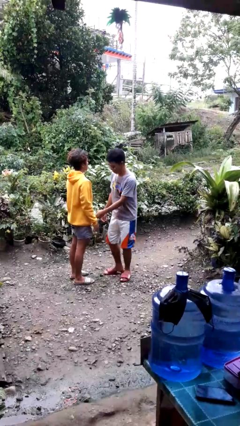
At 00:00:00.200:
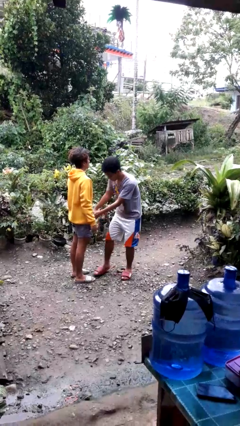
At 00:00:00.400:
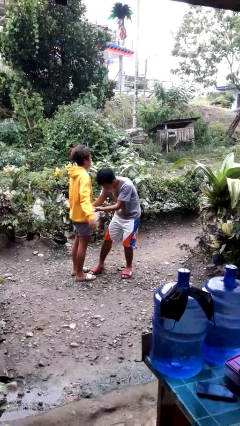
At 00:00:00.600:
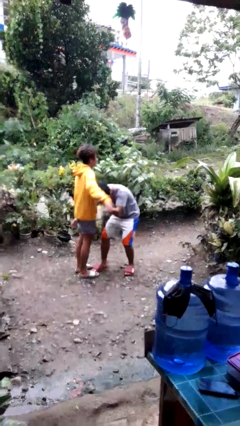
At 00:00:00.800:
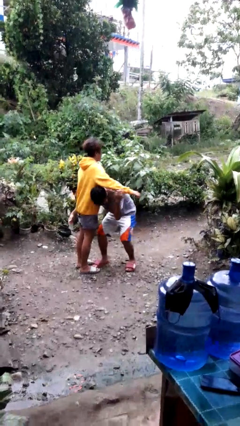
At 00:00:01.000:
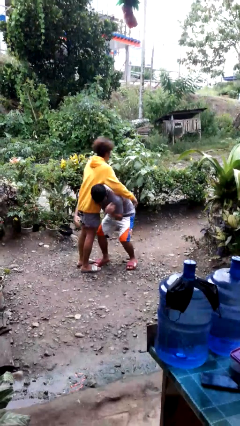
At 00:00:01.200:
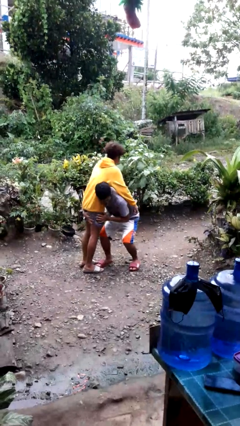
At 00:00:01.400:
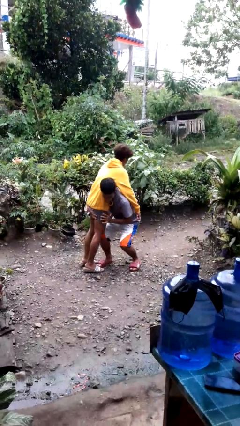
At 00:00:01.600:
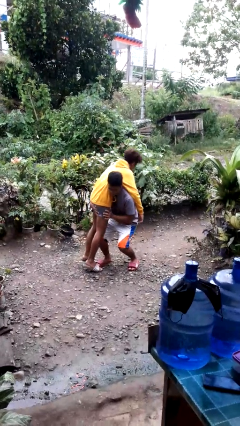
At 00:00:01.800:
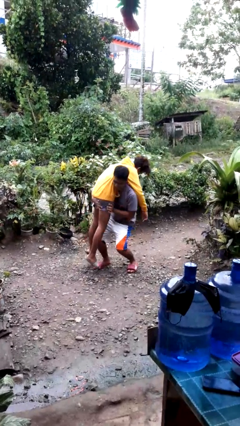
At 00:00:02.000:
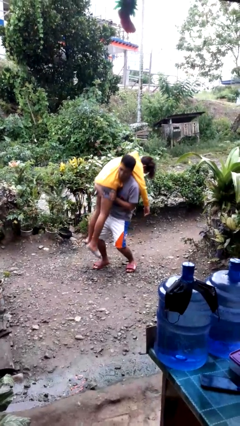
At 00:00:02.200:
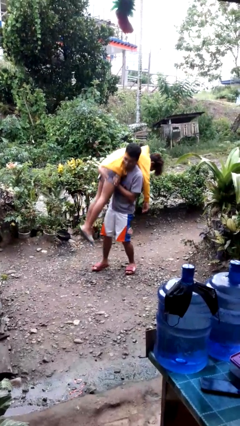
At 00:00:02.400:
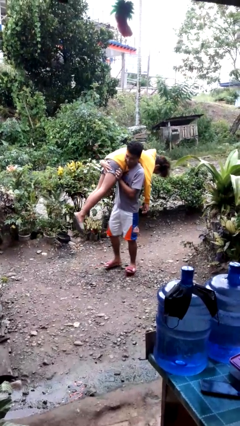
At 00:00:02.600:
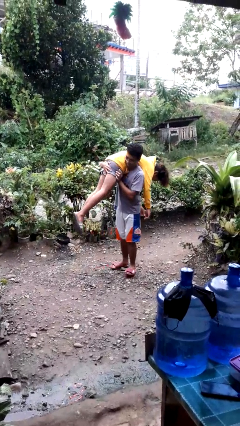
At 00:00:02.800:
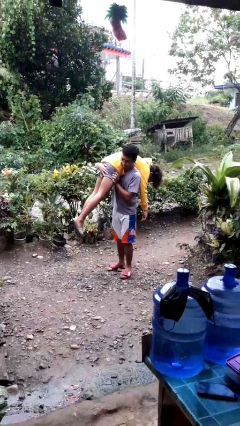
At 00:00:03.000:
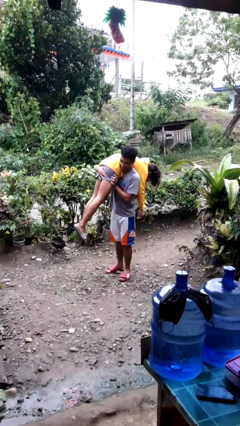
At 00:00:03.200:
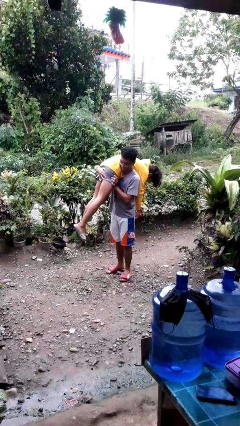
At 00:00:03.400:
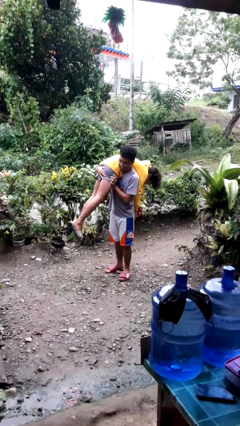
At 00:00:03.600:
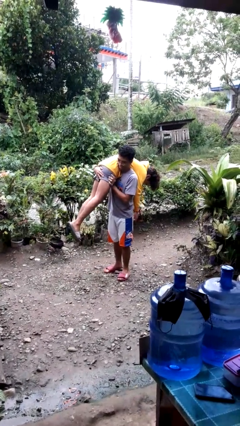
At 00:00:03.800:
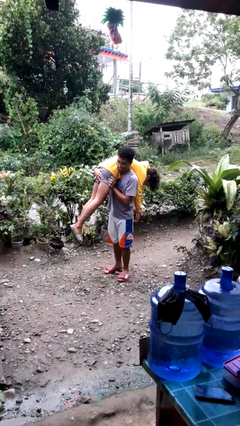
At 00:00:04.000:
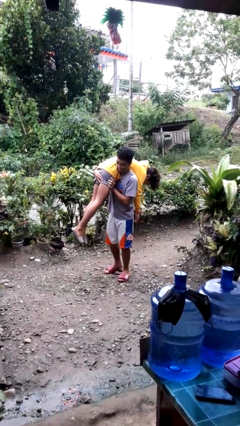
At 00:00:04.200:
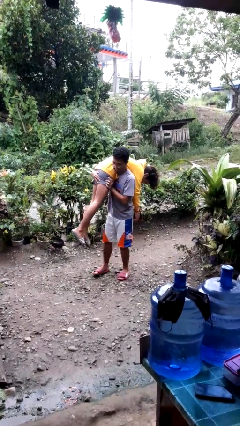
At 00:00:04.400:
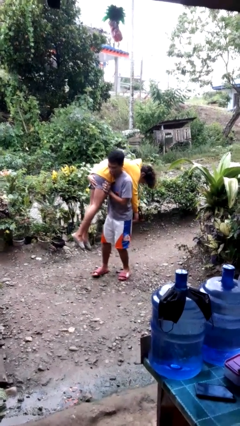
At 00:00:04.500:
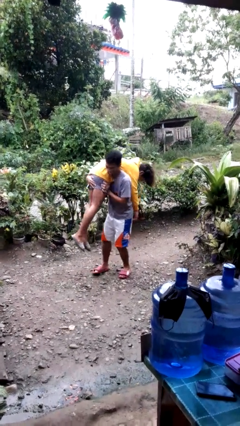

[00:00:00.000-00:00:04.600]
person carries person over shoulder

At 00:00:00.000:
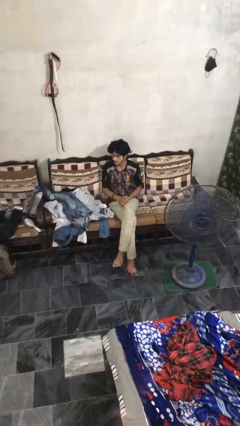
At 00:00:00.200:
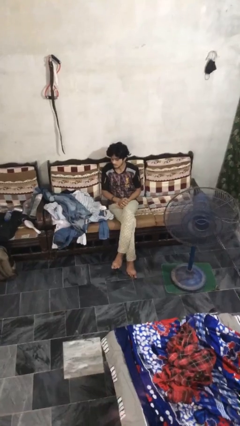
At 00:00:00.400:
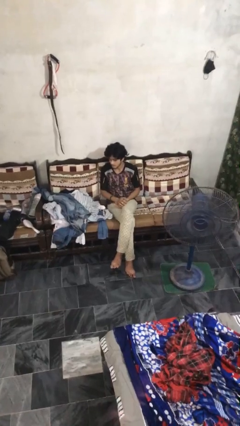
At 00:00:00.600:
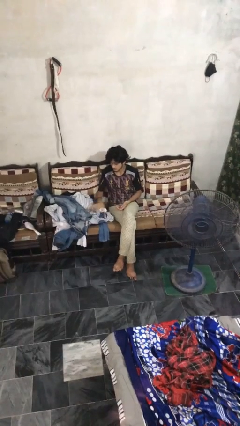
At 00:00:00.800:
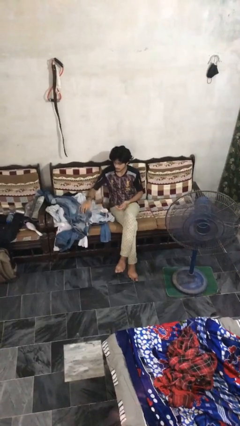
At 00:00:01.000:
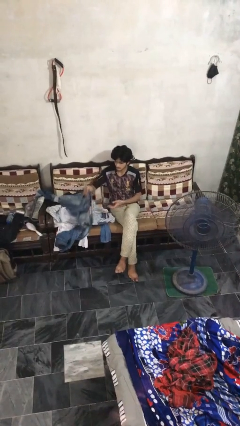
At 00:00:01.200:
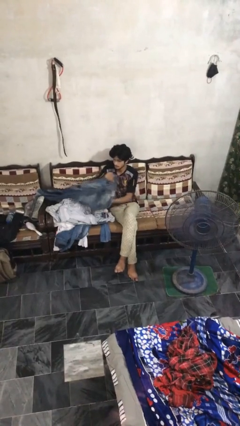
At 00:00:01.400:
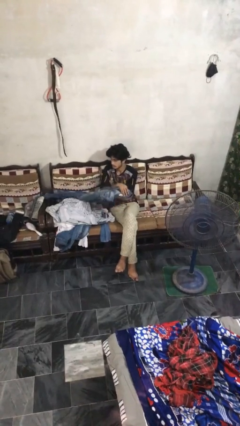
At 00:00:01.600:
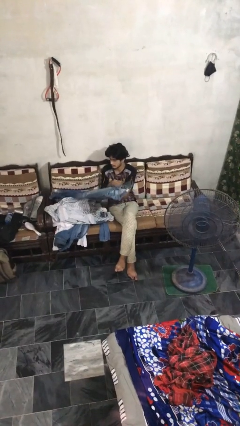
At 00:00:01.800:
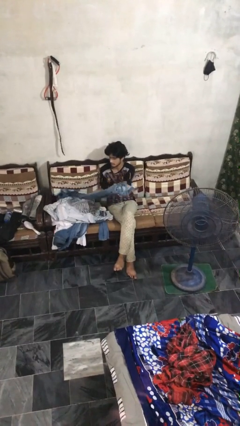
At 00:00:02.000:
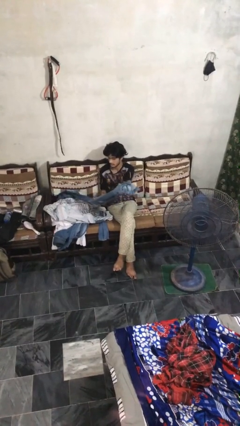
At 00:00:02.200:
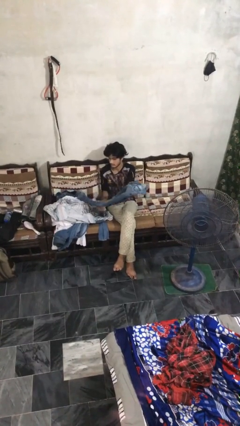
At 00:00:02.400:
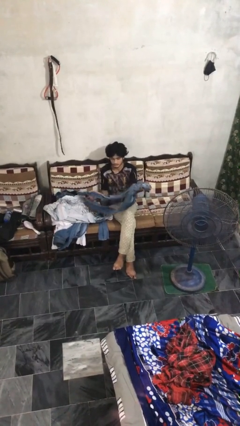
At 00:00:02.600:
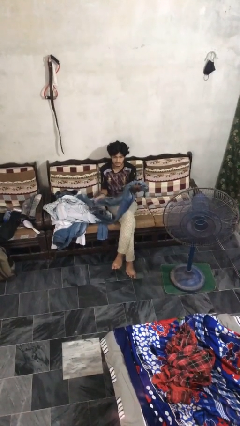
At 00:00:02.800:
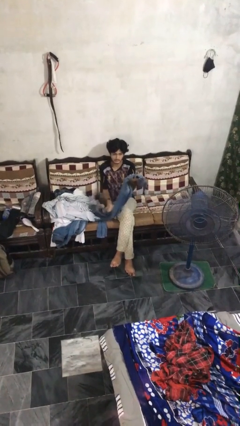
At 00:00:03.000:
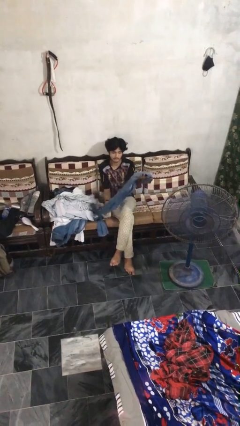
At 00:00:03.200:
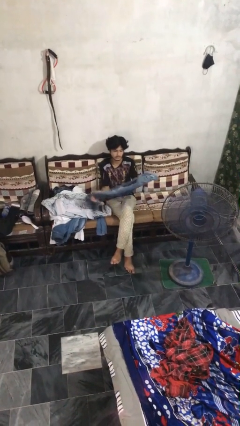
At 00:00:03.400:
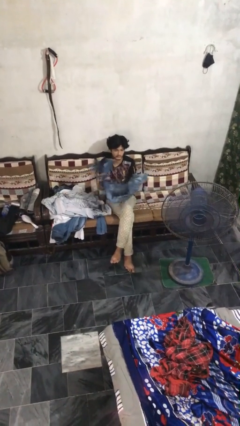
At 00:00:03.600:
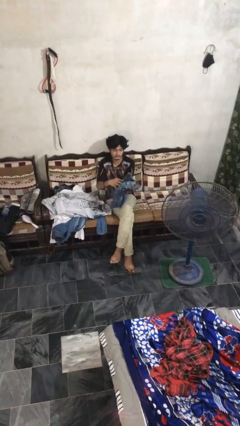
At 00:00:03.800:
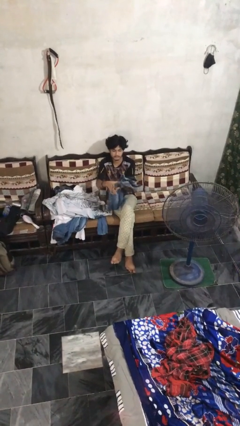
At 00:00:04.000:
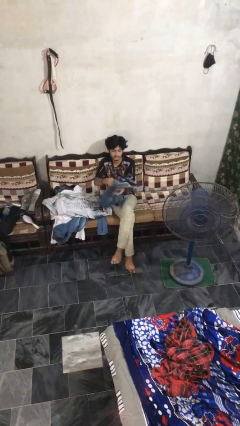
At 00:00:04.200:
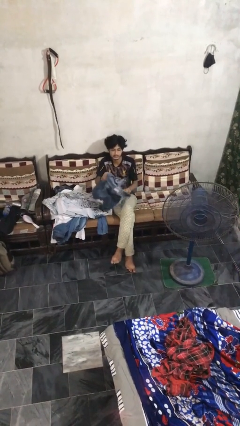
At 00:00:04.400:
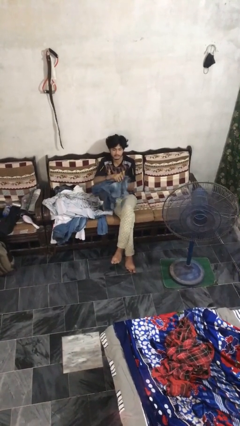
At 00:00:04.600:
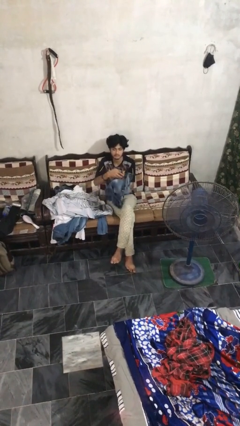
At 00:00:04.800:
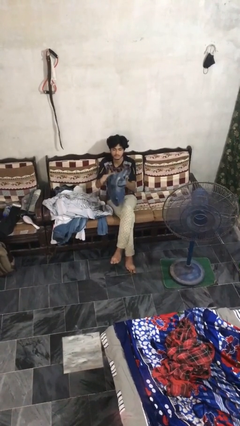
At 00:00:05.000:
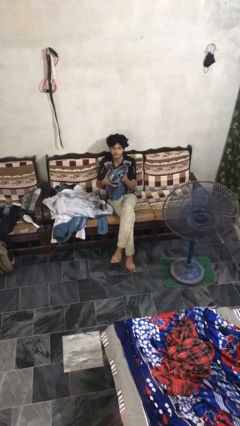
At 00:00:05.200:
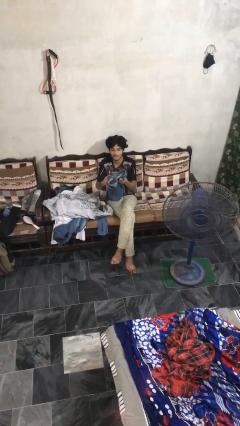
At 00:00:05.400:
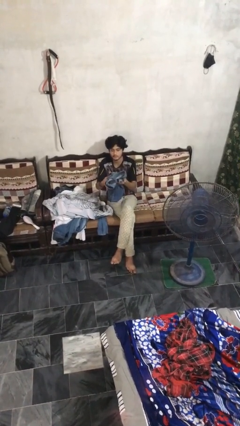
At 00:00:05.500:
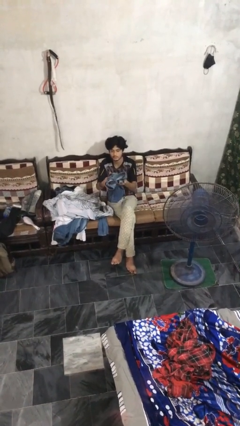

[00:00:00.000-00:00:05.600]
person folds pants

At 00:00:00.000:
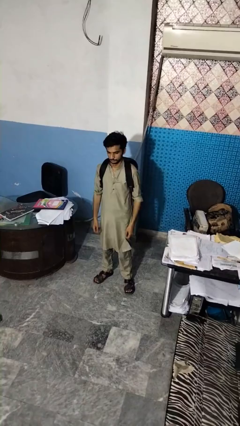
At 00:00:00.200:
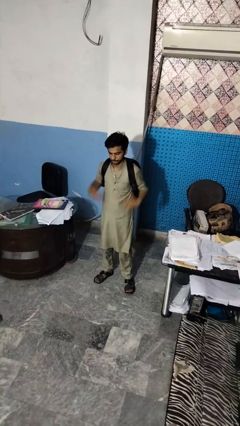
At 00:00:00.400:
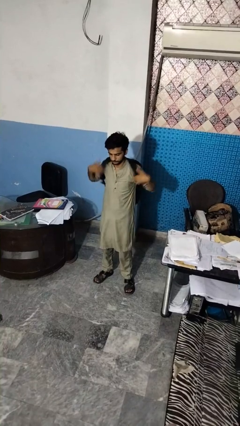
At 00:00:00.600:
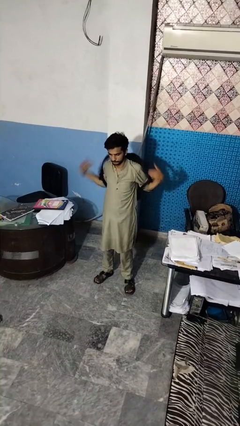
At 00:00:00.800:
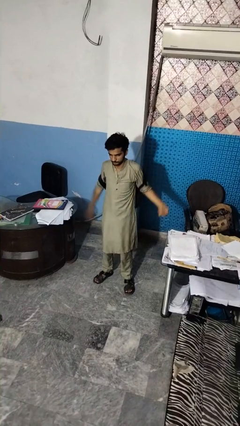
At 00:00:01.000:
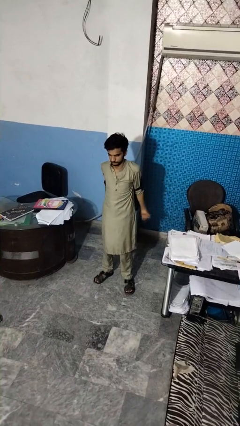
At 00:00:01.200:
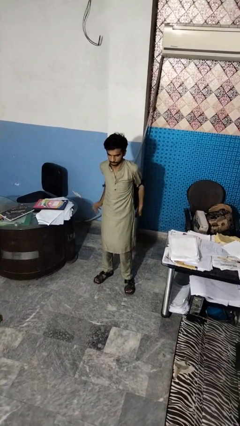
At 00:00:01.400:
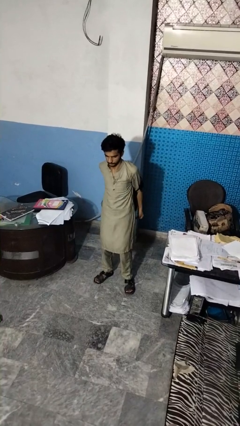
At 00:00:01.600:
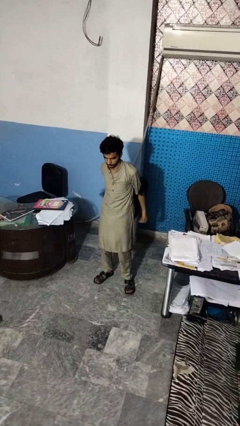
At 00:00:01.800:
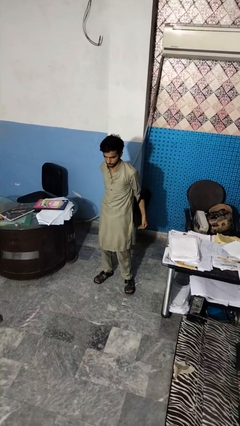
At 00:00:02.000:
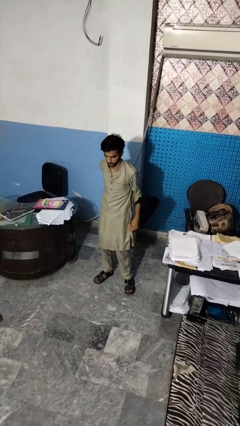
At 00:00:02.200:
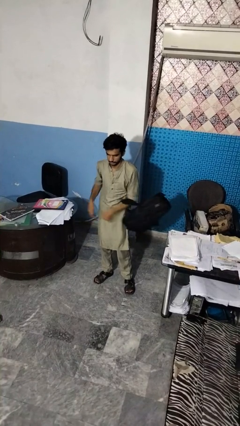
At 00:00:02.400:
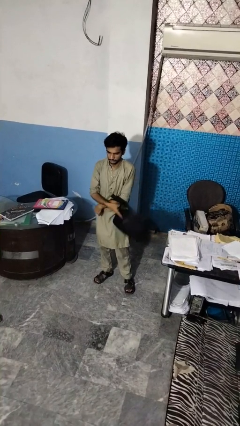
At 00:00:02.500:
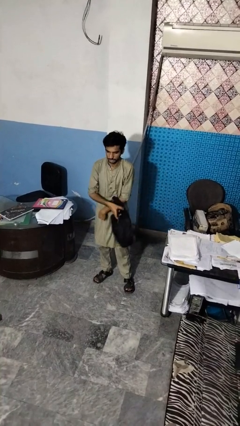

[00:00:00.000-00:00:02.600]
person takes off backpack

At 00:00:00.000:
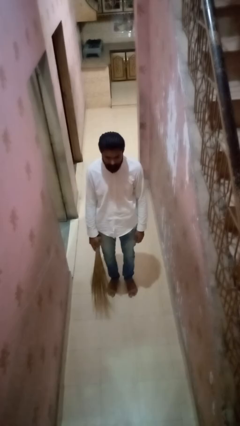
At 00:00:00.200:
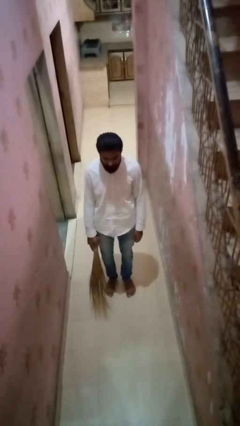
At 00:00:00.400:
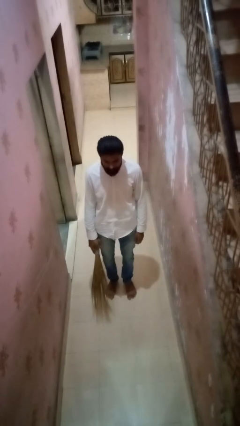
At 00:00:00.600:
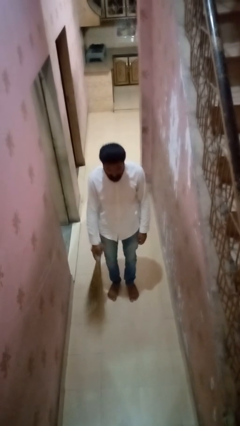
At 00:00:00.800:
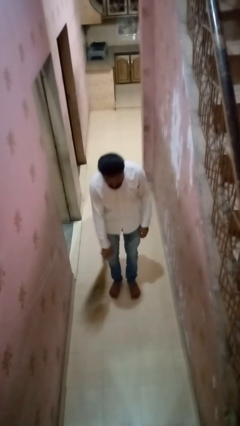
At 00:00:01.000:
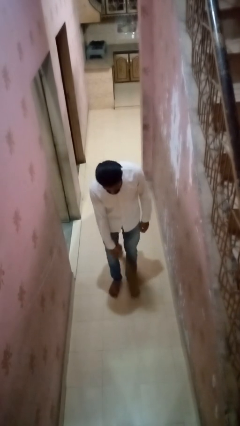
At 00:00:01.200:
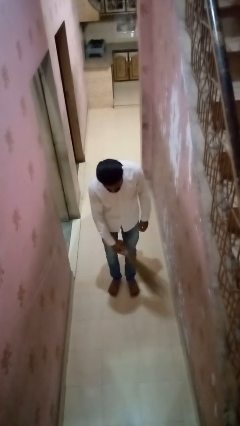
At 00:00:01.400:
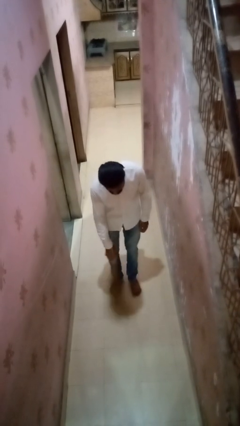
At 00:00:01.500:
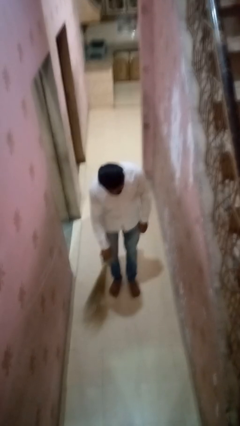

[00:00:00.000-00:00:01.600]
person sweeps floor

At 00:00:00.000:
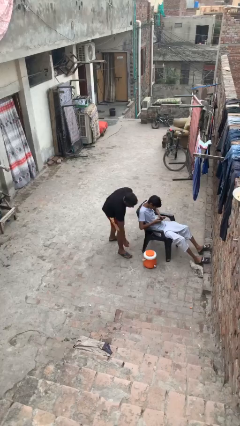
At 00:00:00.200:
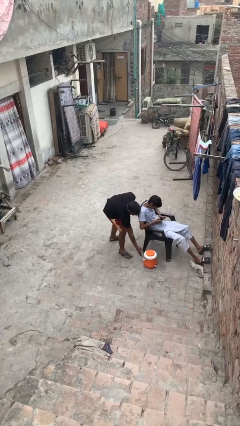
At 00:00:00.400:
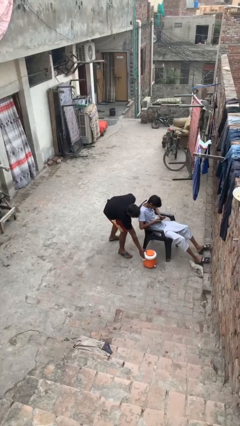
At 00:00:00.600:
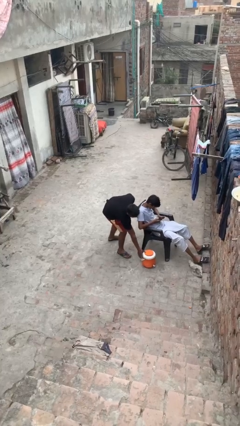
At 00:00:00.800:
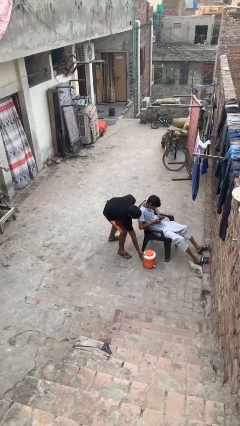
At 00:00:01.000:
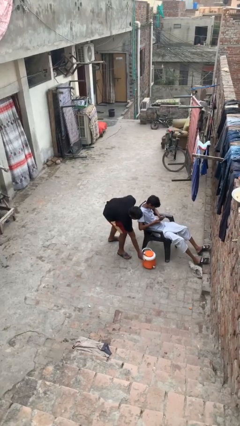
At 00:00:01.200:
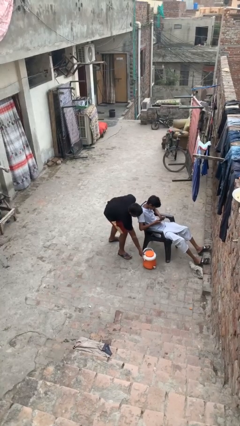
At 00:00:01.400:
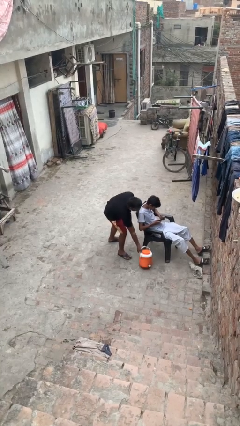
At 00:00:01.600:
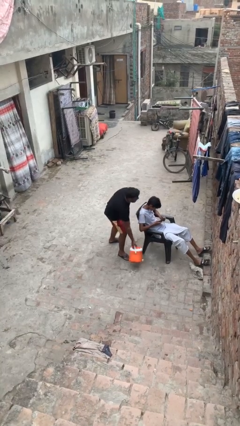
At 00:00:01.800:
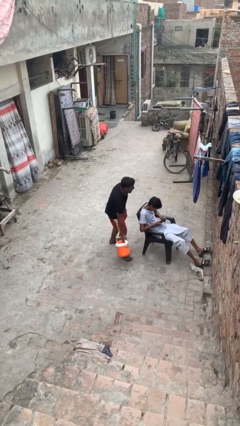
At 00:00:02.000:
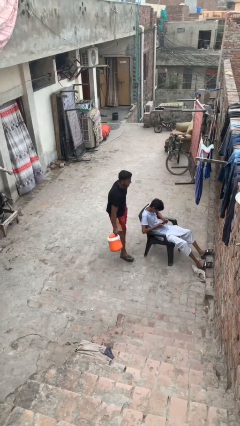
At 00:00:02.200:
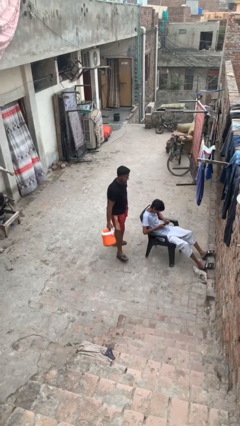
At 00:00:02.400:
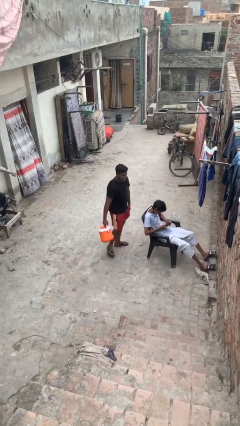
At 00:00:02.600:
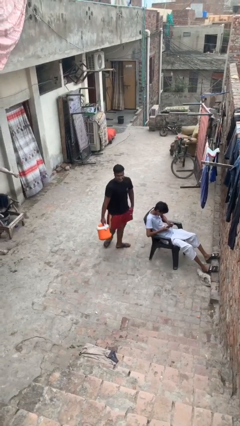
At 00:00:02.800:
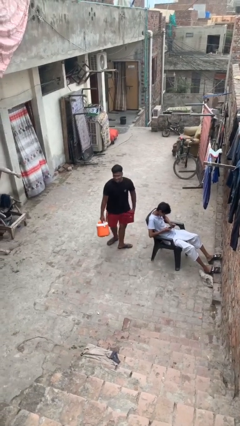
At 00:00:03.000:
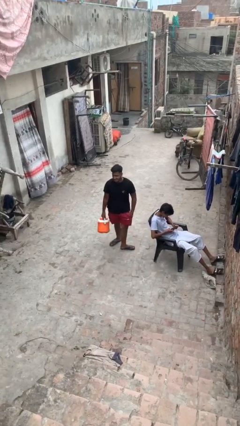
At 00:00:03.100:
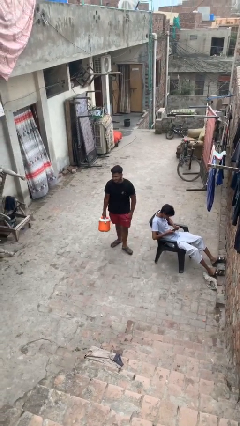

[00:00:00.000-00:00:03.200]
person steals object from person
